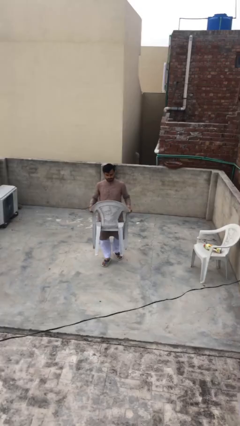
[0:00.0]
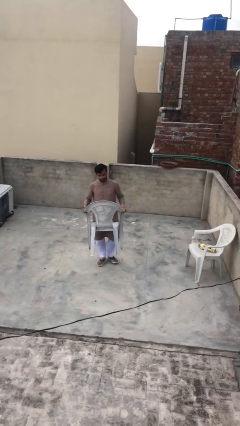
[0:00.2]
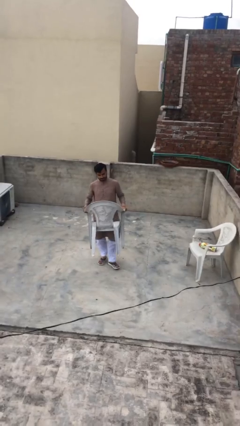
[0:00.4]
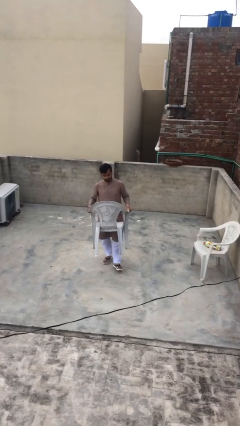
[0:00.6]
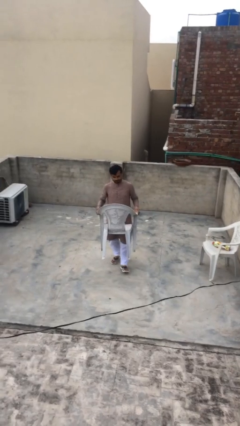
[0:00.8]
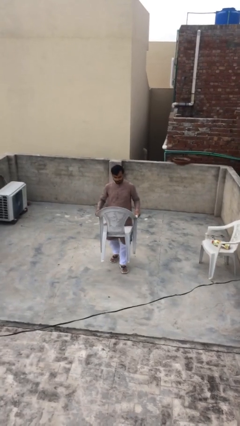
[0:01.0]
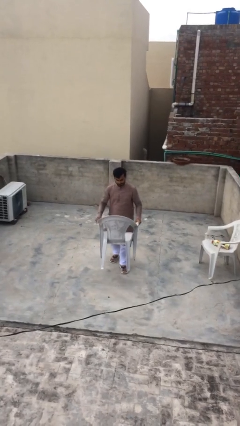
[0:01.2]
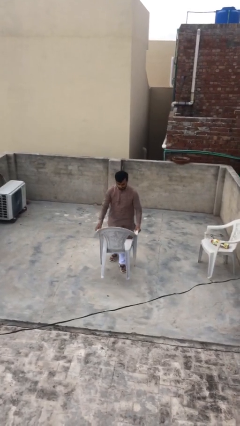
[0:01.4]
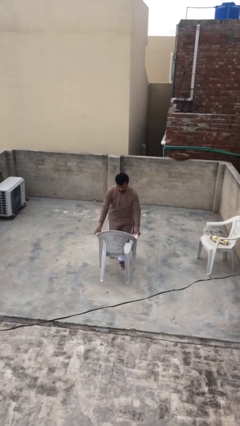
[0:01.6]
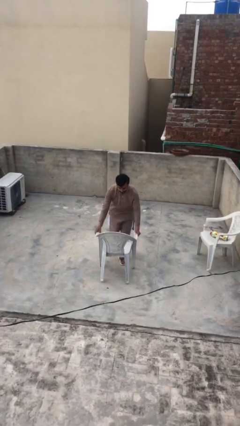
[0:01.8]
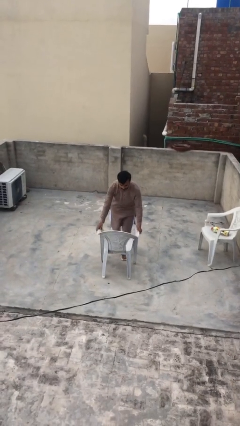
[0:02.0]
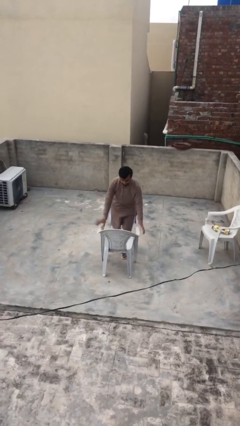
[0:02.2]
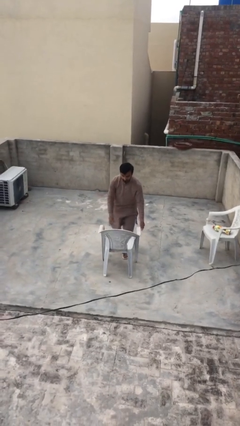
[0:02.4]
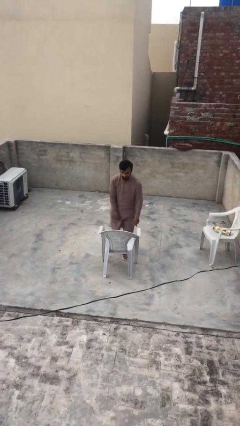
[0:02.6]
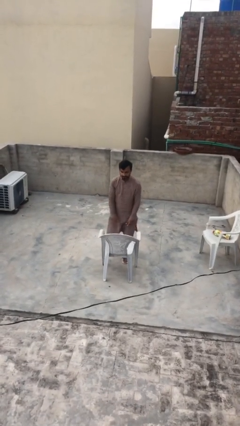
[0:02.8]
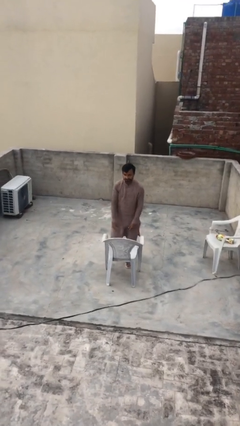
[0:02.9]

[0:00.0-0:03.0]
person puts down object on floor

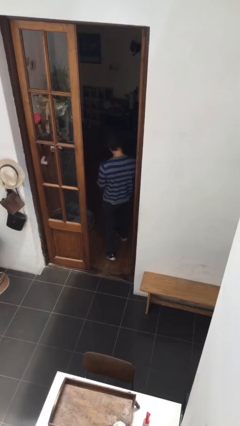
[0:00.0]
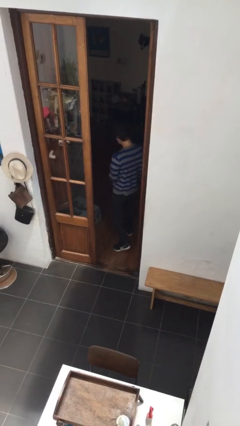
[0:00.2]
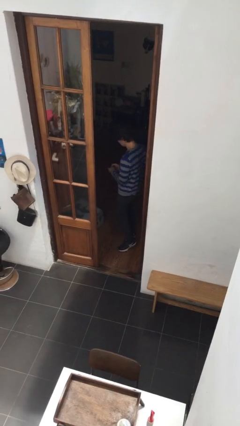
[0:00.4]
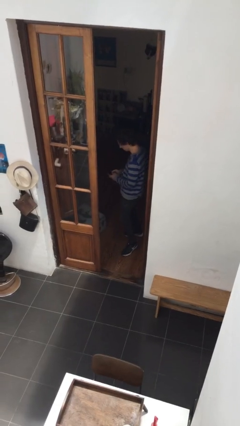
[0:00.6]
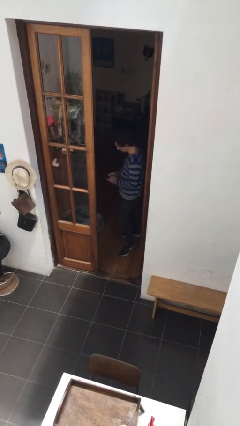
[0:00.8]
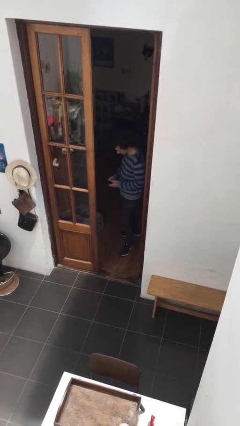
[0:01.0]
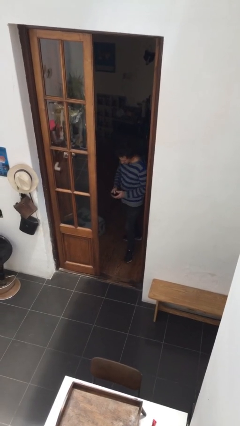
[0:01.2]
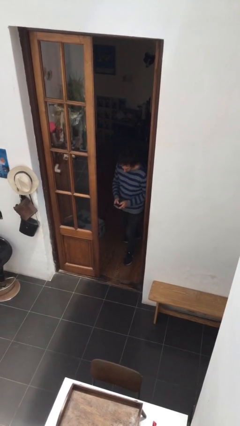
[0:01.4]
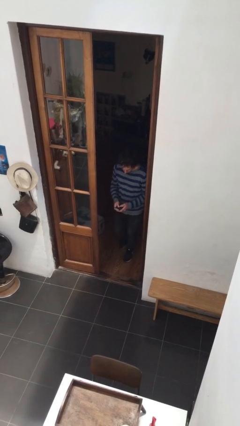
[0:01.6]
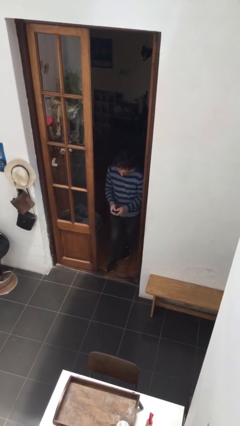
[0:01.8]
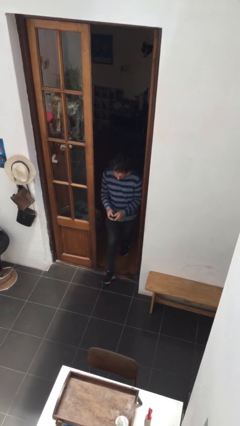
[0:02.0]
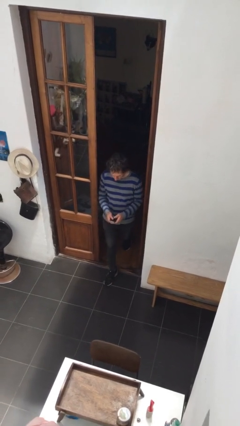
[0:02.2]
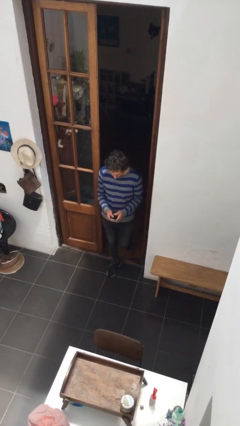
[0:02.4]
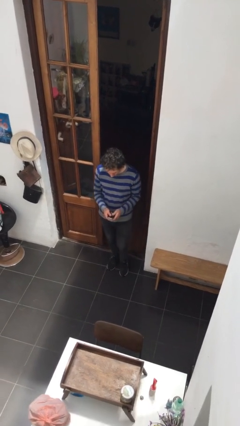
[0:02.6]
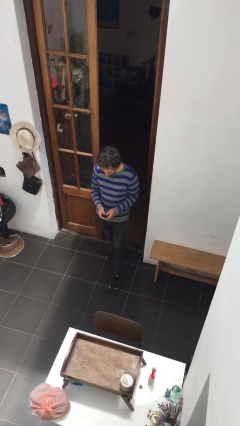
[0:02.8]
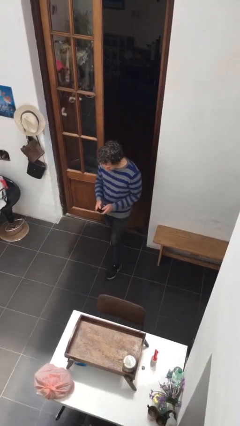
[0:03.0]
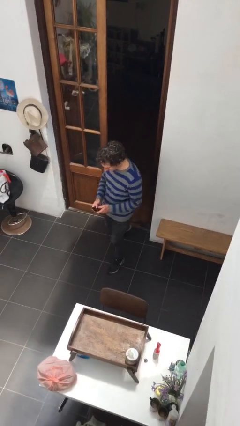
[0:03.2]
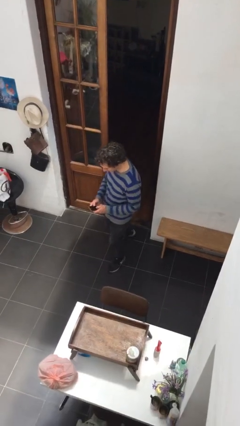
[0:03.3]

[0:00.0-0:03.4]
person enters scene through structure

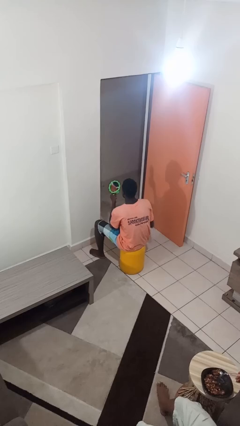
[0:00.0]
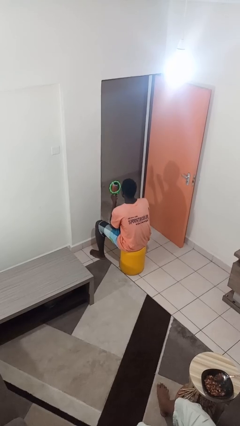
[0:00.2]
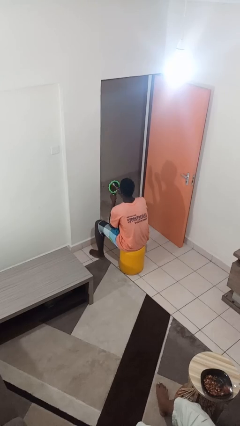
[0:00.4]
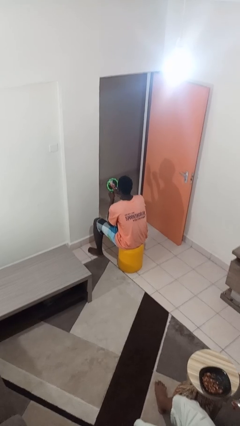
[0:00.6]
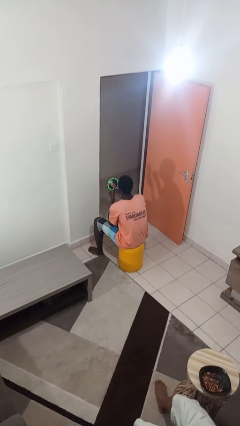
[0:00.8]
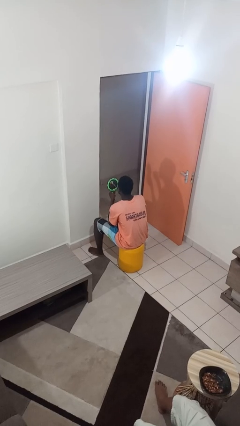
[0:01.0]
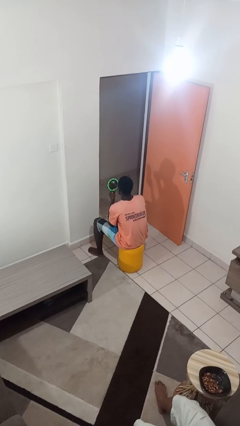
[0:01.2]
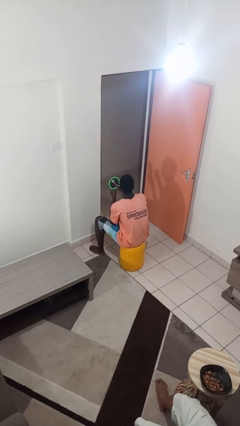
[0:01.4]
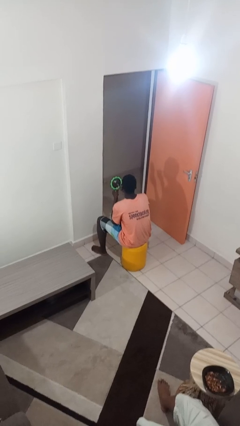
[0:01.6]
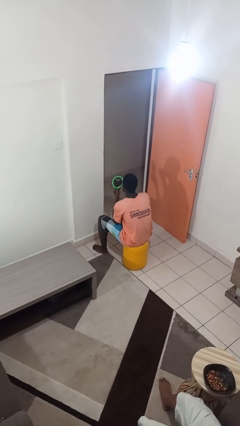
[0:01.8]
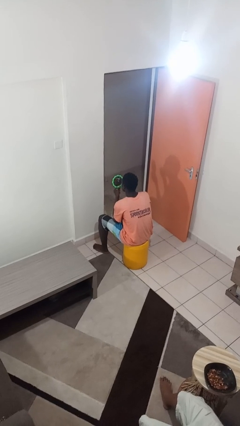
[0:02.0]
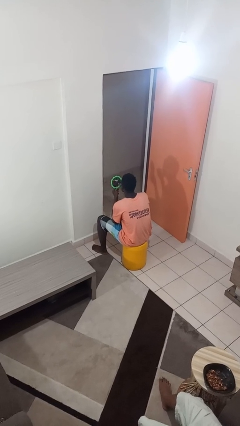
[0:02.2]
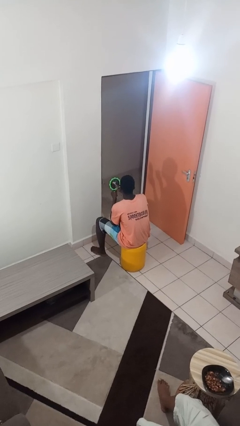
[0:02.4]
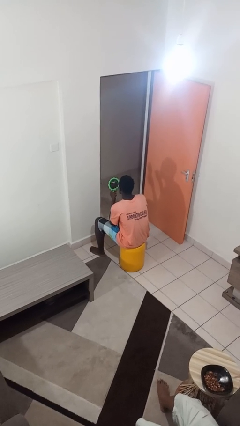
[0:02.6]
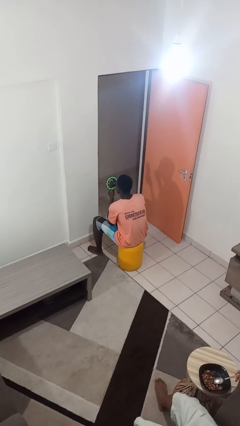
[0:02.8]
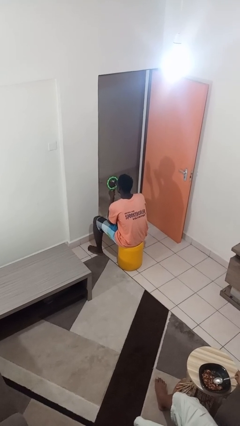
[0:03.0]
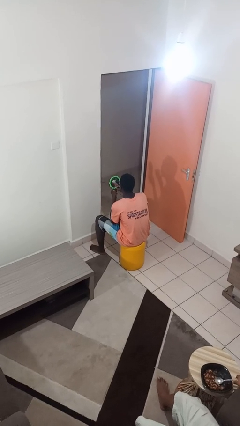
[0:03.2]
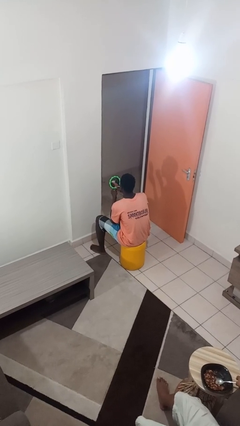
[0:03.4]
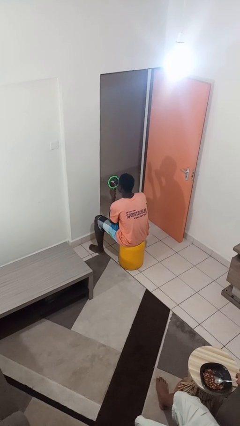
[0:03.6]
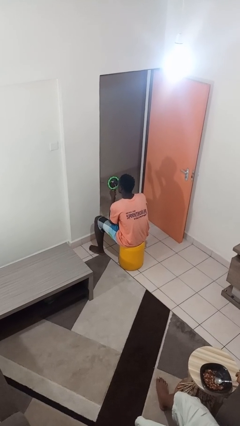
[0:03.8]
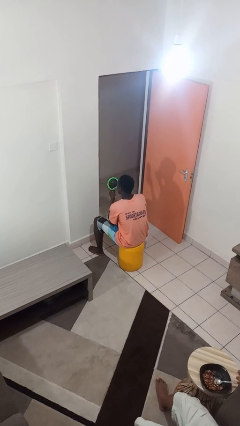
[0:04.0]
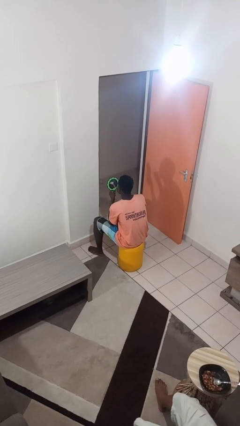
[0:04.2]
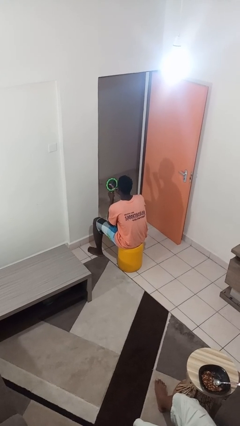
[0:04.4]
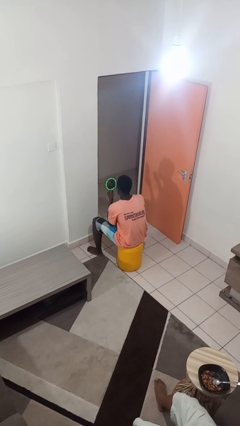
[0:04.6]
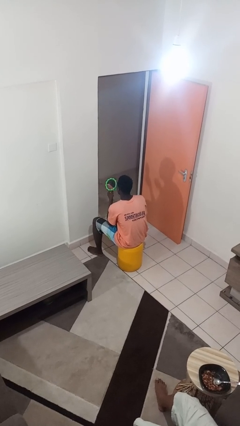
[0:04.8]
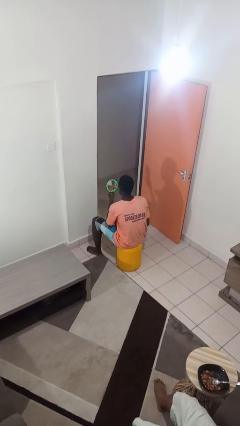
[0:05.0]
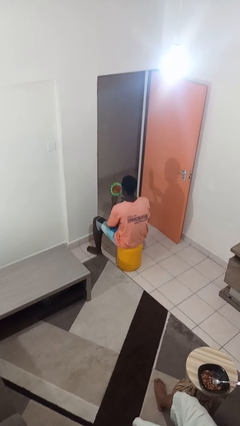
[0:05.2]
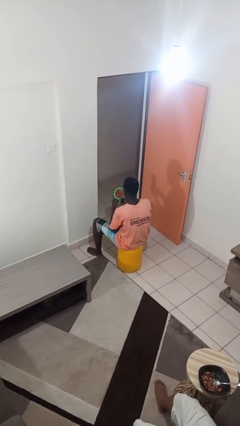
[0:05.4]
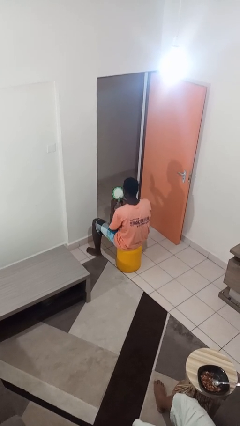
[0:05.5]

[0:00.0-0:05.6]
person applies lip makeup

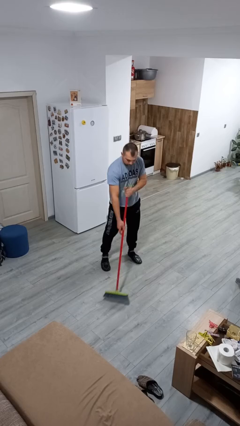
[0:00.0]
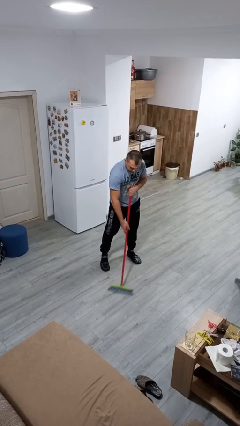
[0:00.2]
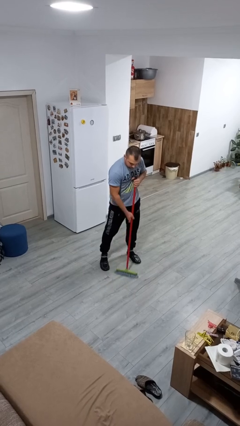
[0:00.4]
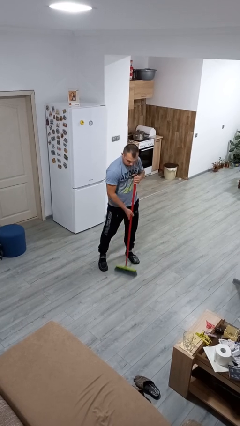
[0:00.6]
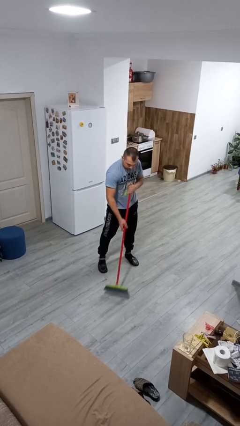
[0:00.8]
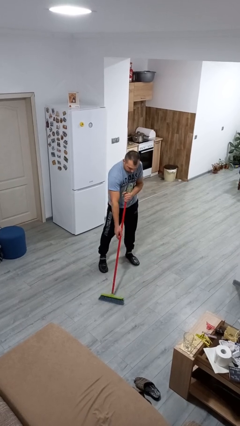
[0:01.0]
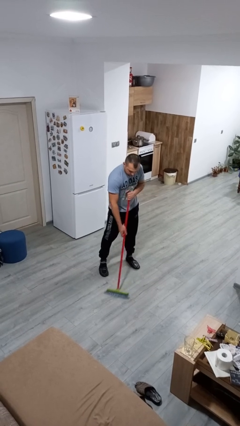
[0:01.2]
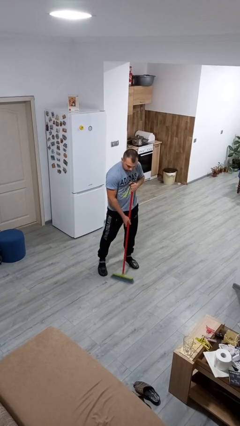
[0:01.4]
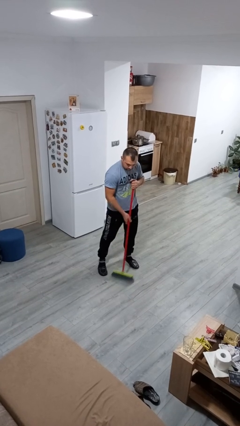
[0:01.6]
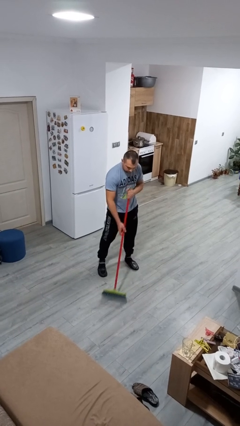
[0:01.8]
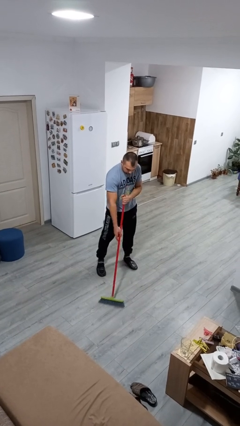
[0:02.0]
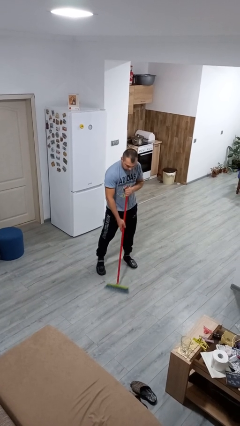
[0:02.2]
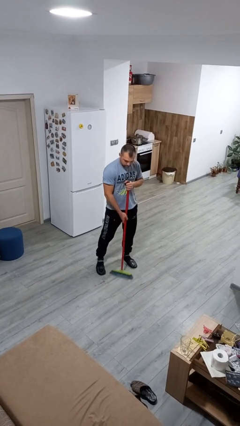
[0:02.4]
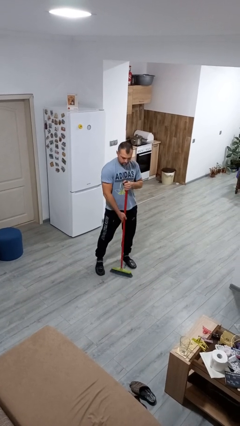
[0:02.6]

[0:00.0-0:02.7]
person sweeps floor

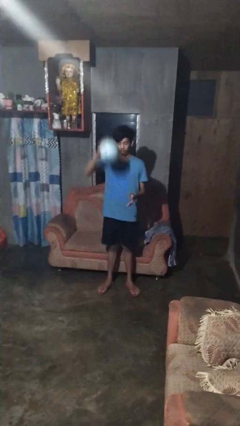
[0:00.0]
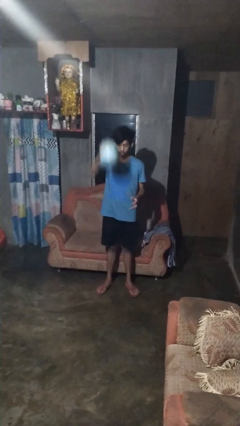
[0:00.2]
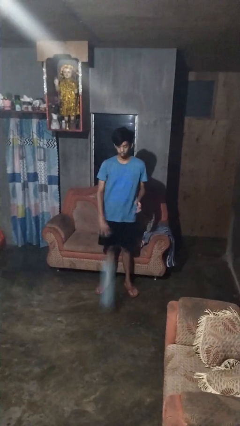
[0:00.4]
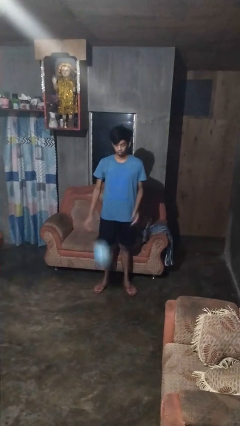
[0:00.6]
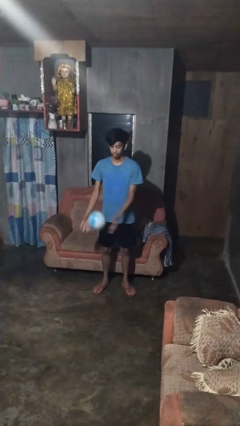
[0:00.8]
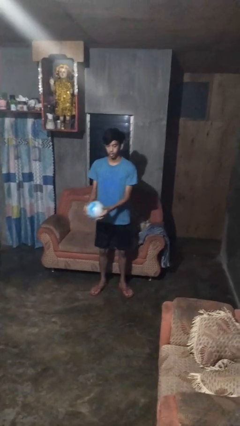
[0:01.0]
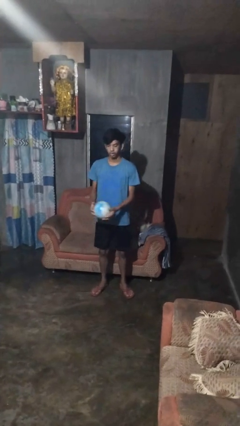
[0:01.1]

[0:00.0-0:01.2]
person bounces ball on floor

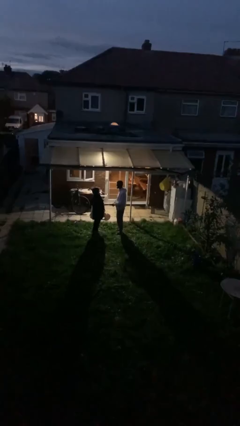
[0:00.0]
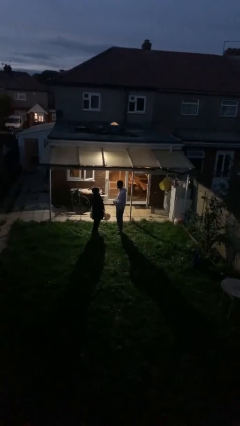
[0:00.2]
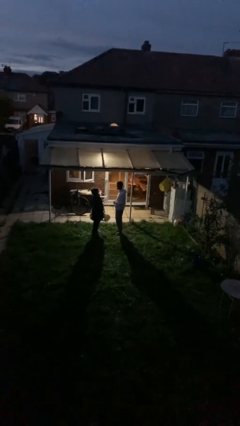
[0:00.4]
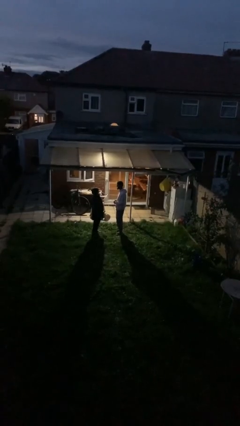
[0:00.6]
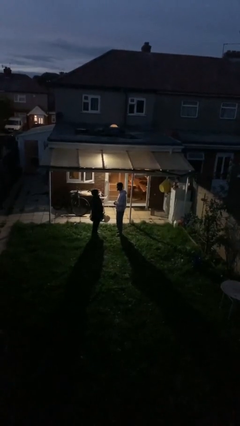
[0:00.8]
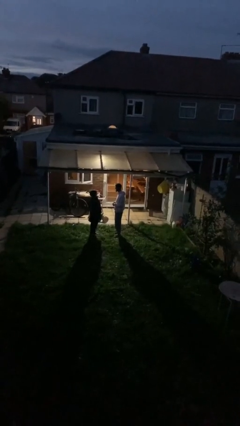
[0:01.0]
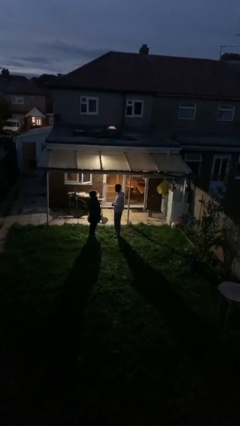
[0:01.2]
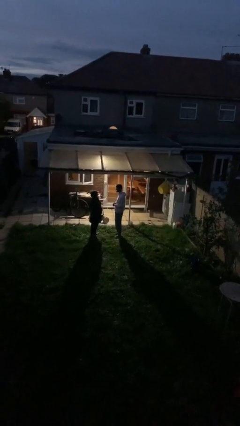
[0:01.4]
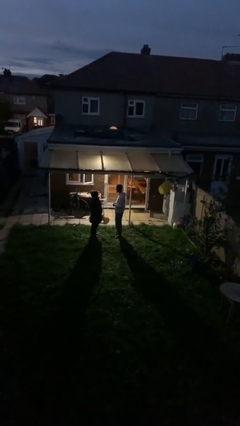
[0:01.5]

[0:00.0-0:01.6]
person talks to person
